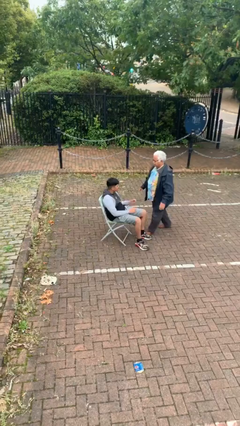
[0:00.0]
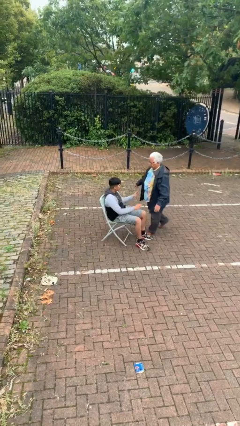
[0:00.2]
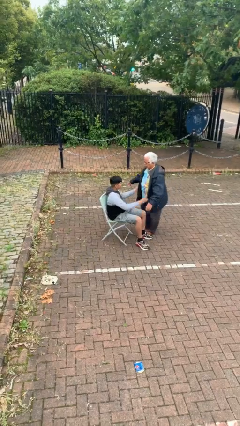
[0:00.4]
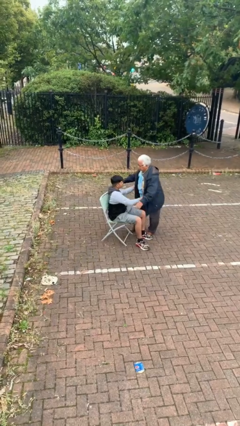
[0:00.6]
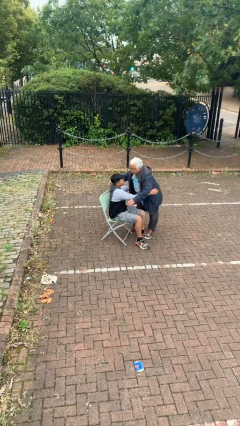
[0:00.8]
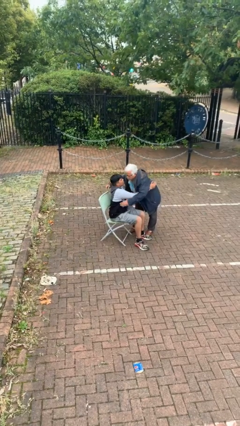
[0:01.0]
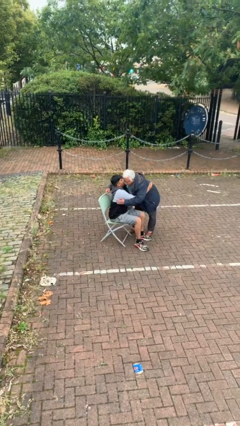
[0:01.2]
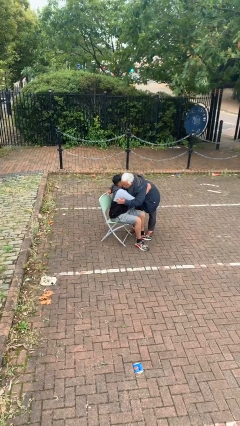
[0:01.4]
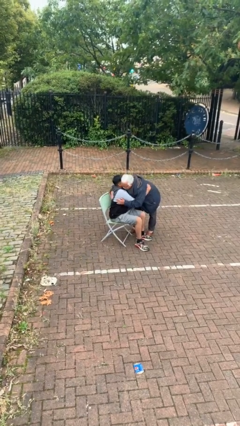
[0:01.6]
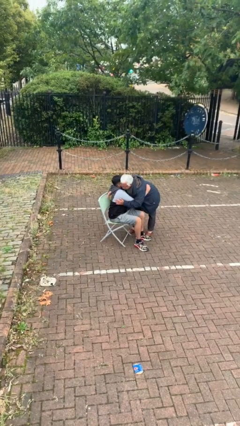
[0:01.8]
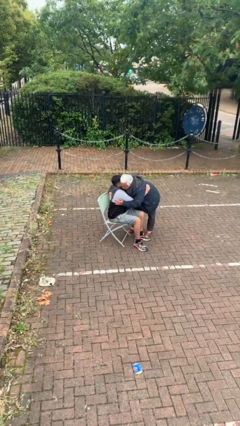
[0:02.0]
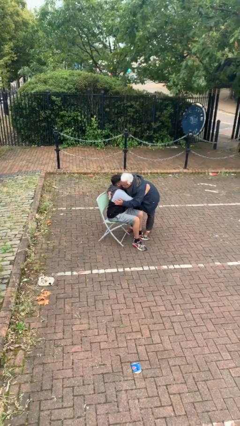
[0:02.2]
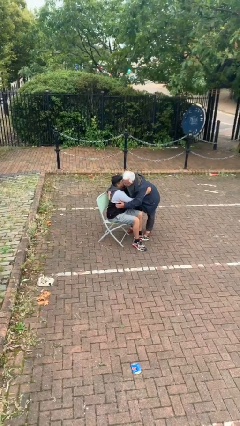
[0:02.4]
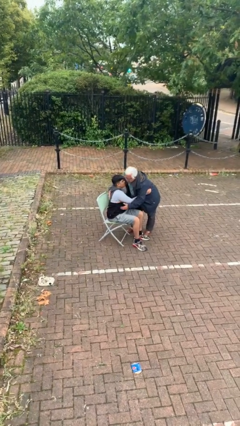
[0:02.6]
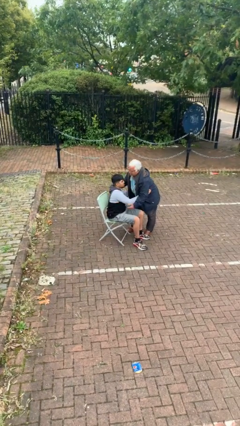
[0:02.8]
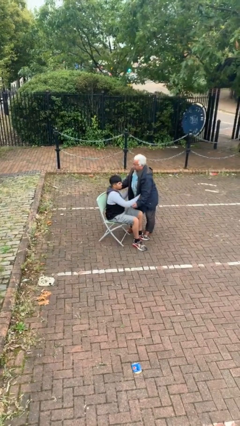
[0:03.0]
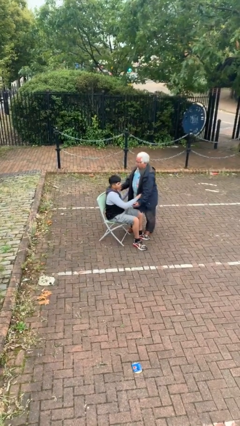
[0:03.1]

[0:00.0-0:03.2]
person embraces person

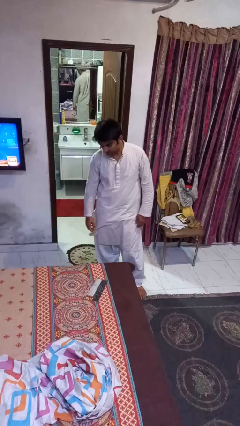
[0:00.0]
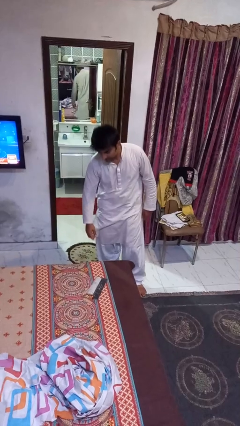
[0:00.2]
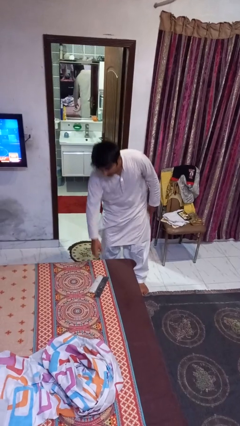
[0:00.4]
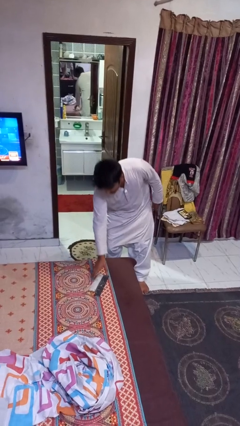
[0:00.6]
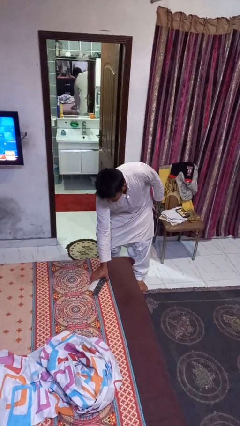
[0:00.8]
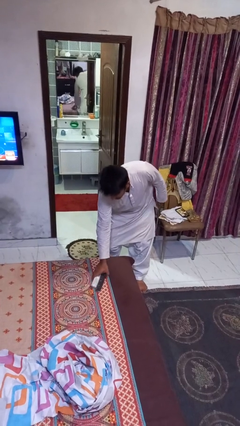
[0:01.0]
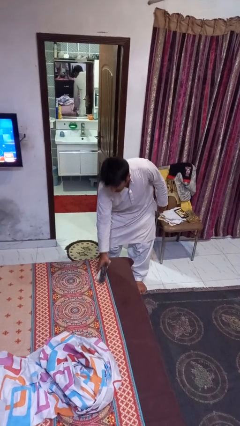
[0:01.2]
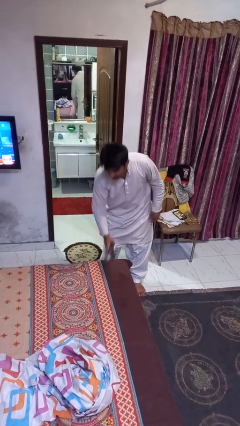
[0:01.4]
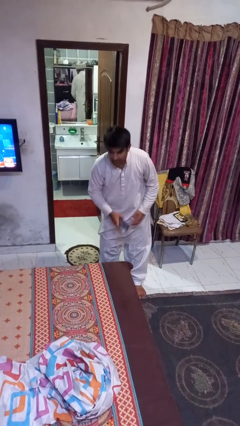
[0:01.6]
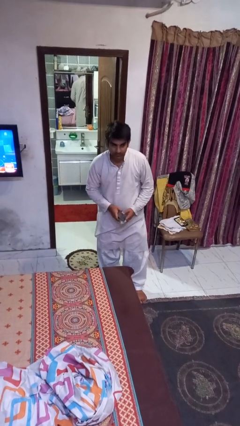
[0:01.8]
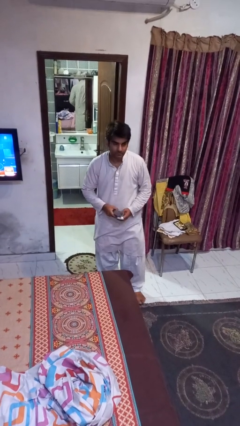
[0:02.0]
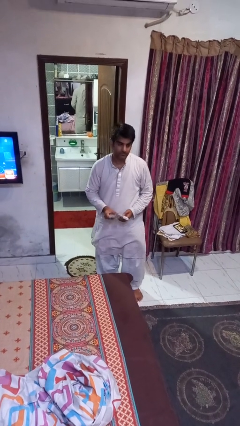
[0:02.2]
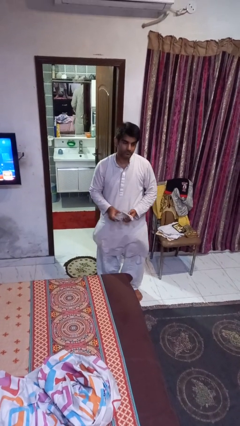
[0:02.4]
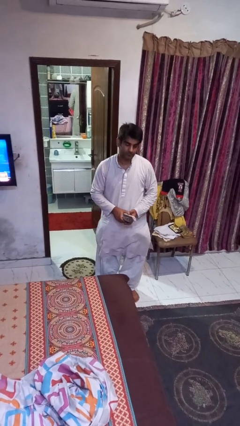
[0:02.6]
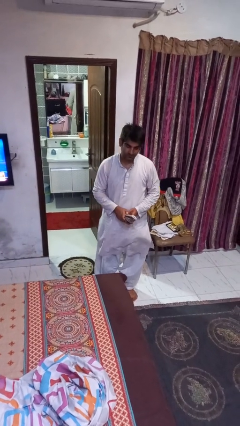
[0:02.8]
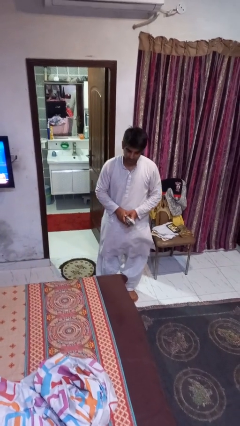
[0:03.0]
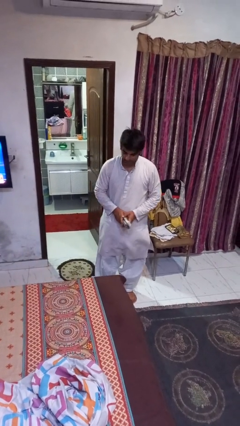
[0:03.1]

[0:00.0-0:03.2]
person picks up object from bed

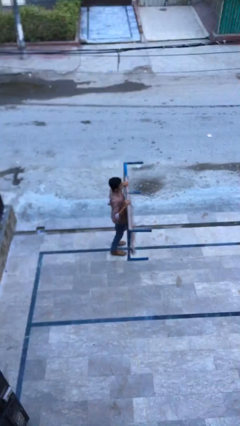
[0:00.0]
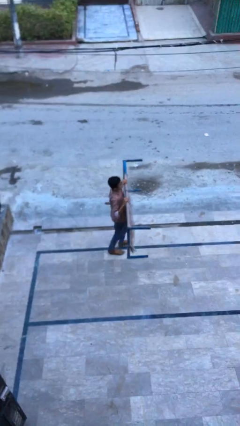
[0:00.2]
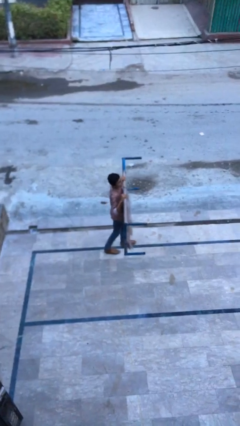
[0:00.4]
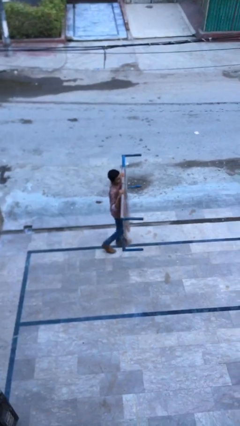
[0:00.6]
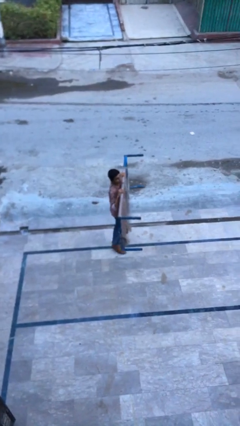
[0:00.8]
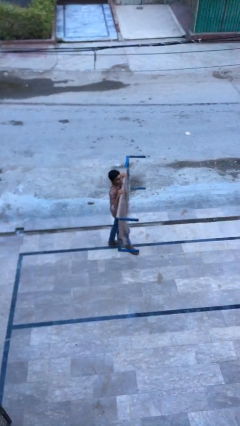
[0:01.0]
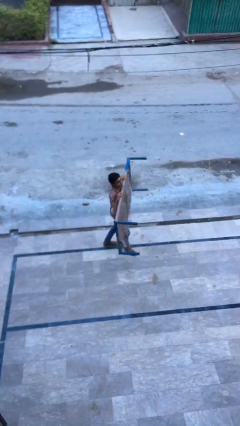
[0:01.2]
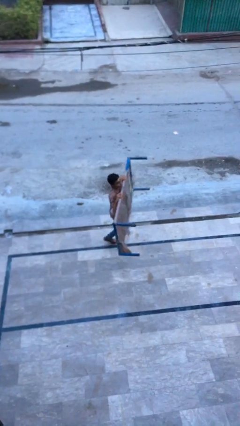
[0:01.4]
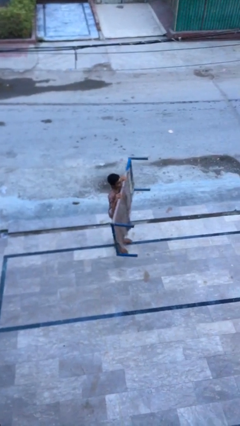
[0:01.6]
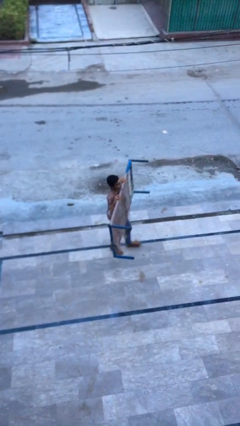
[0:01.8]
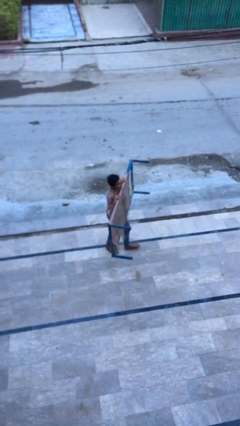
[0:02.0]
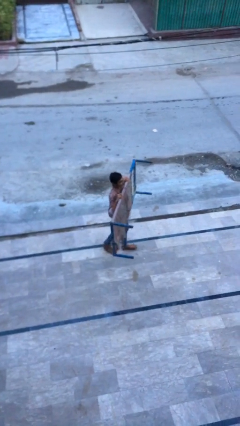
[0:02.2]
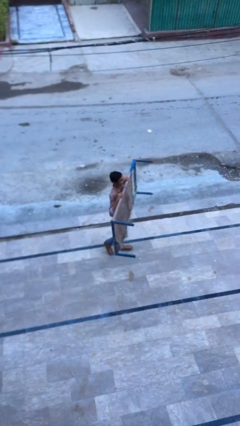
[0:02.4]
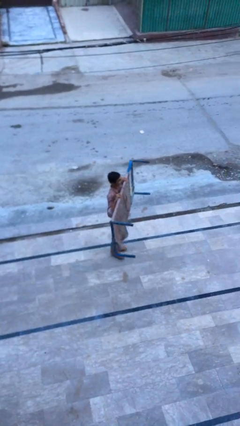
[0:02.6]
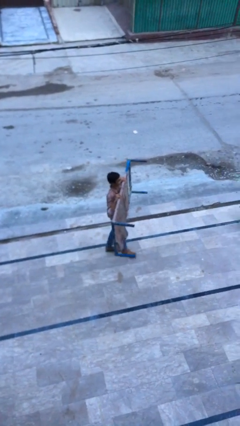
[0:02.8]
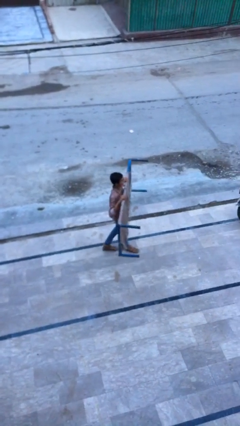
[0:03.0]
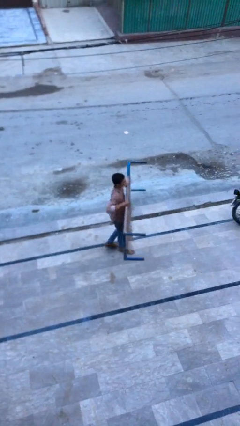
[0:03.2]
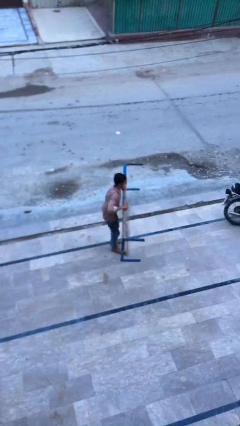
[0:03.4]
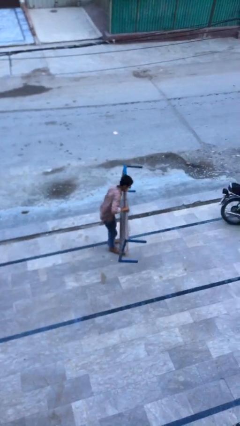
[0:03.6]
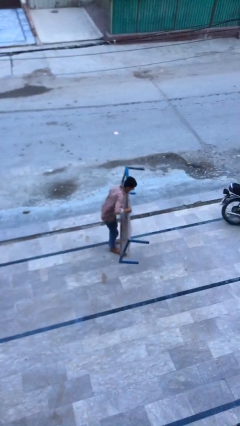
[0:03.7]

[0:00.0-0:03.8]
person carries heavy object

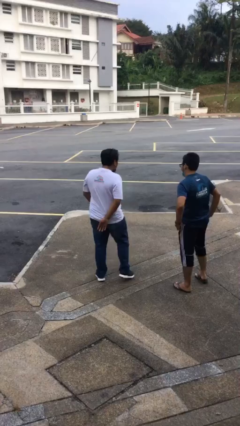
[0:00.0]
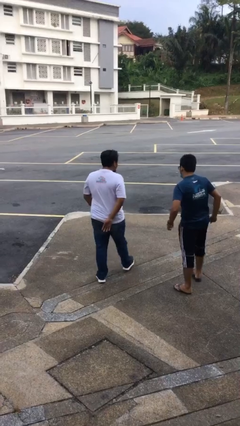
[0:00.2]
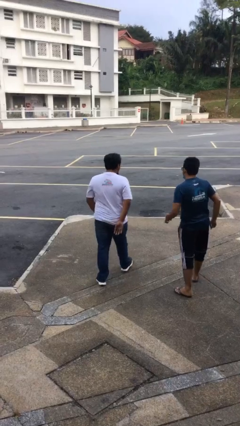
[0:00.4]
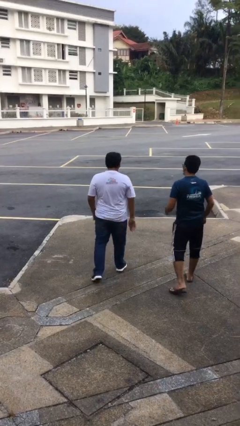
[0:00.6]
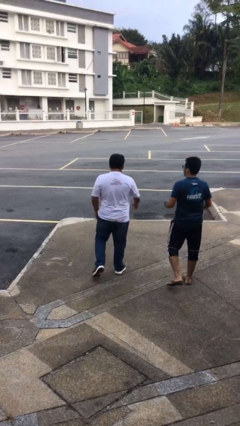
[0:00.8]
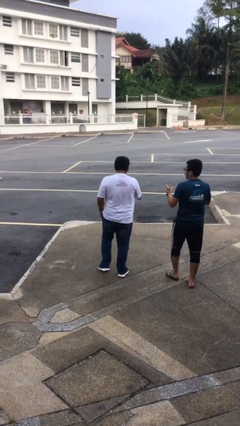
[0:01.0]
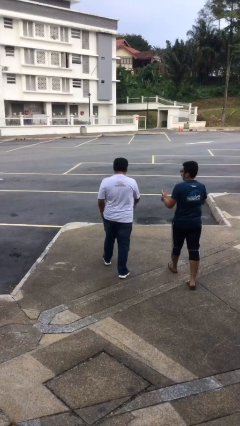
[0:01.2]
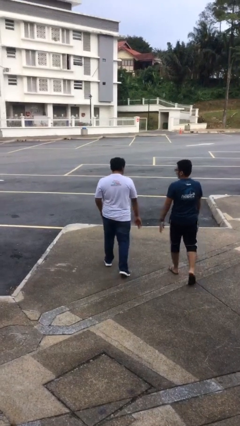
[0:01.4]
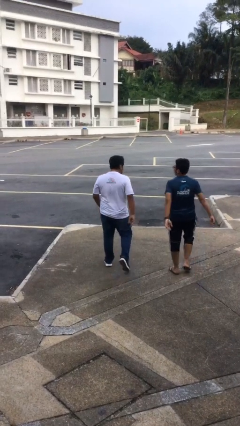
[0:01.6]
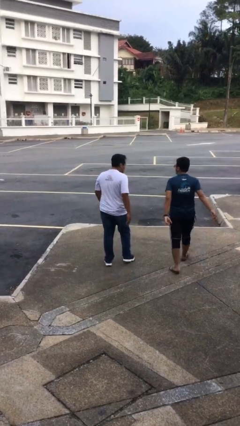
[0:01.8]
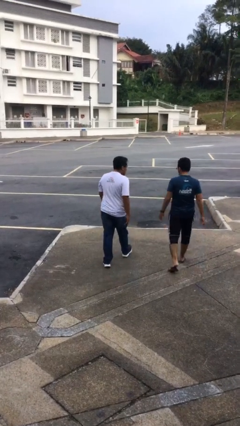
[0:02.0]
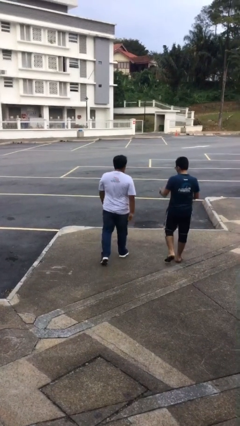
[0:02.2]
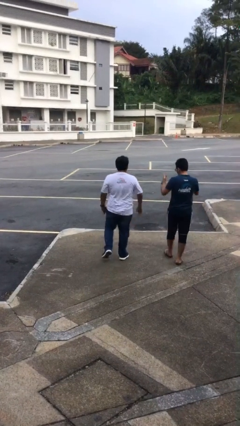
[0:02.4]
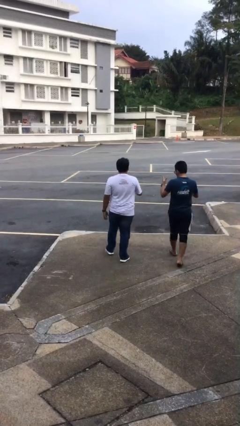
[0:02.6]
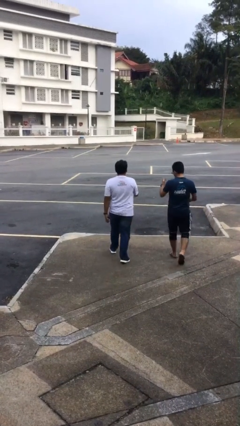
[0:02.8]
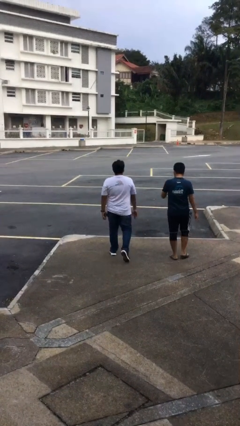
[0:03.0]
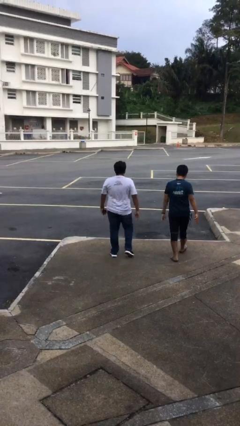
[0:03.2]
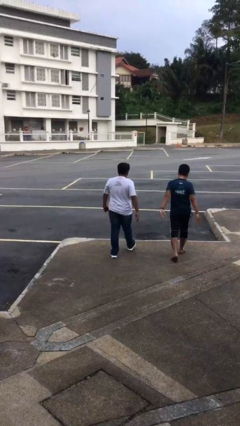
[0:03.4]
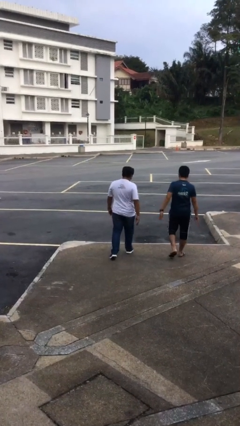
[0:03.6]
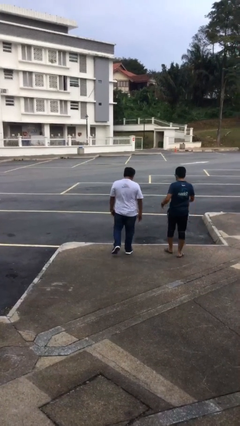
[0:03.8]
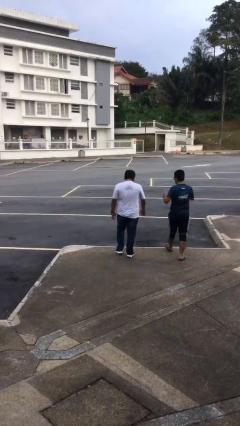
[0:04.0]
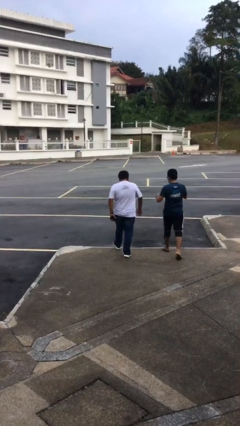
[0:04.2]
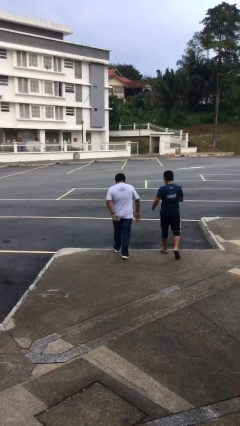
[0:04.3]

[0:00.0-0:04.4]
person talks to person

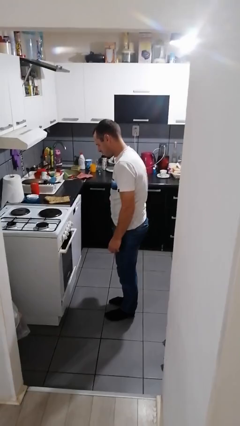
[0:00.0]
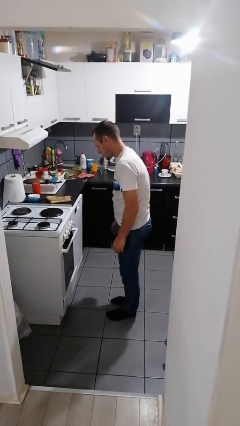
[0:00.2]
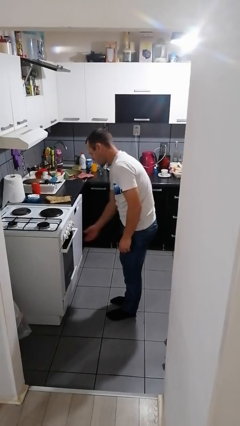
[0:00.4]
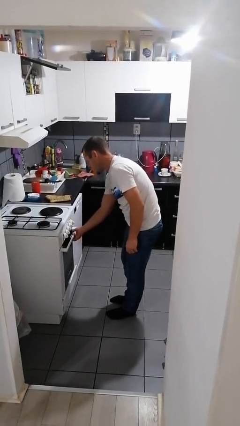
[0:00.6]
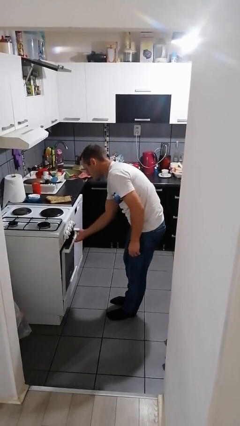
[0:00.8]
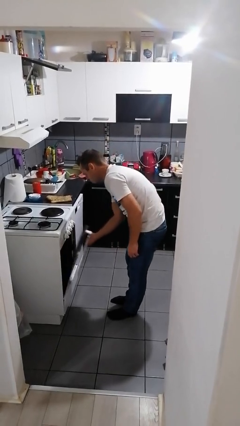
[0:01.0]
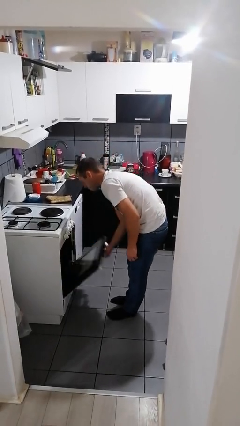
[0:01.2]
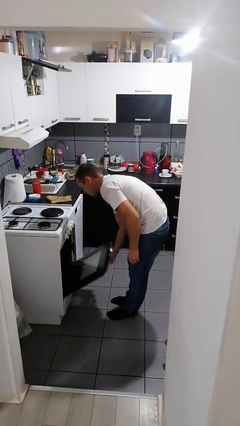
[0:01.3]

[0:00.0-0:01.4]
person opens oven door

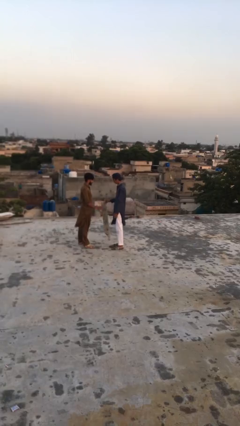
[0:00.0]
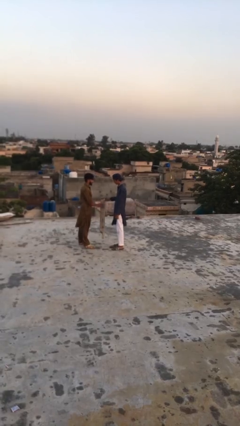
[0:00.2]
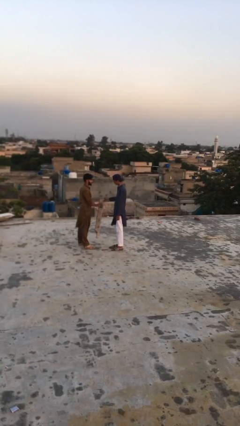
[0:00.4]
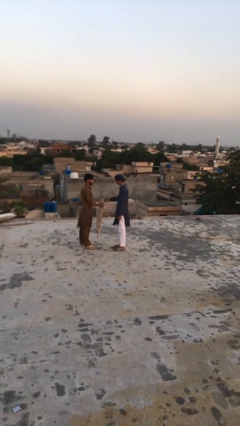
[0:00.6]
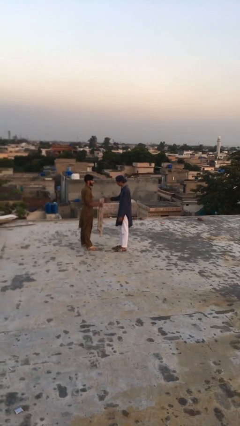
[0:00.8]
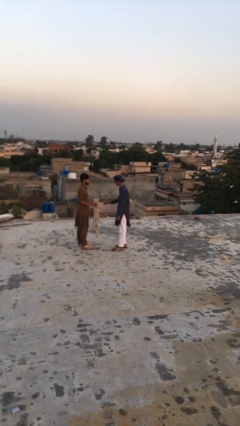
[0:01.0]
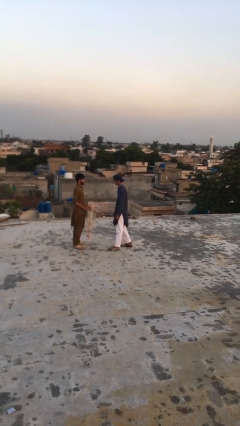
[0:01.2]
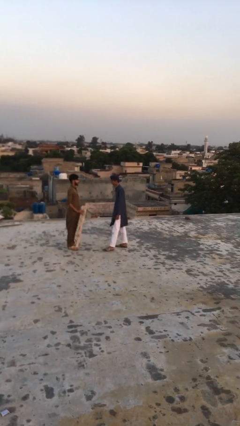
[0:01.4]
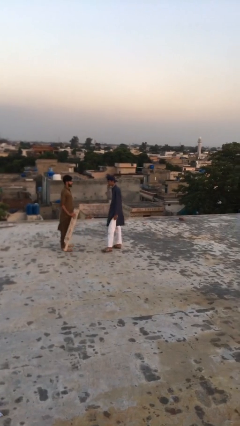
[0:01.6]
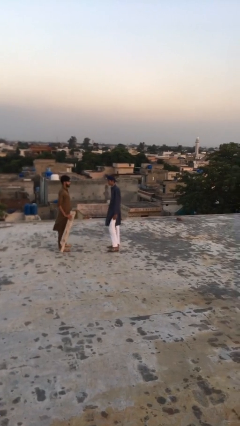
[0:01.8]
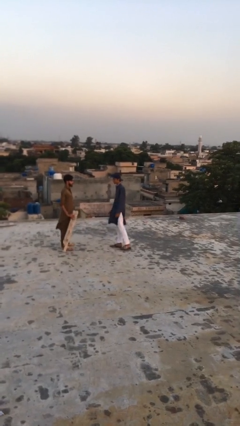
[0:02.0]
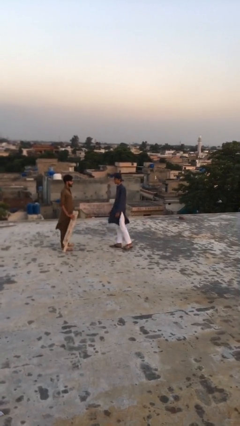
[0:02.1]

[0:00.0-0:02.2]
person transfers object to person
